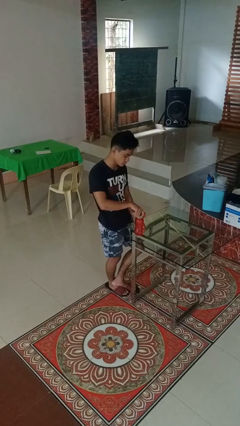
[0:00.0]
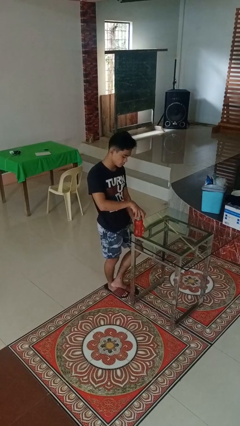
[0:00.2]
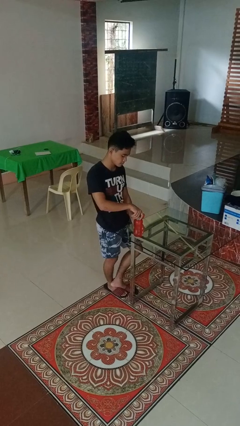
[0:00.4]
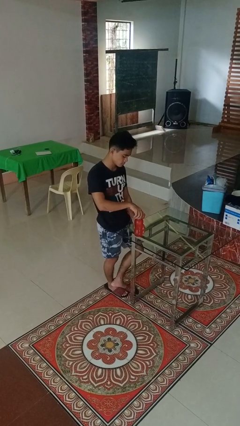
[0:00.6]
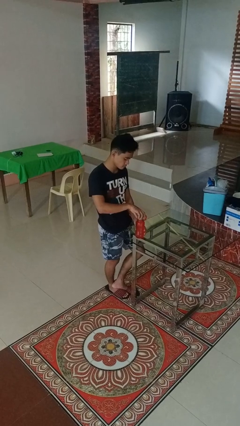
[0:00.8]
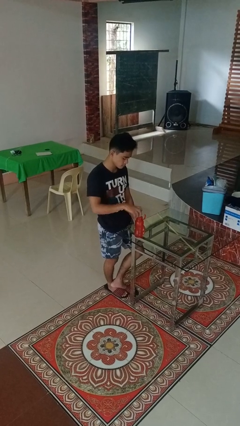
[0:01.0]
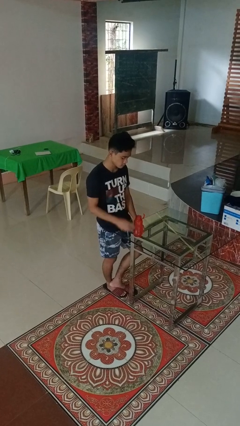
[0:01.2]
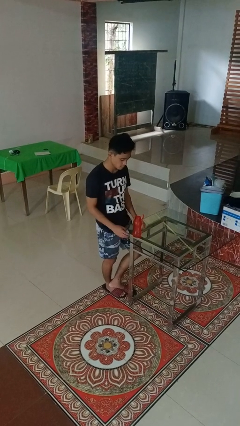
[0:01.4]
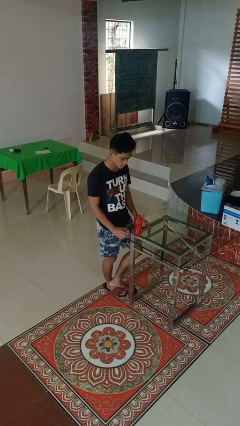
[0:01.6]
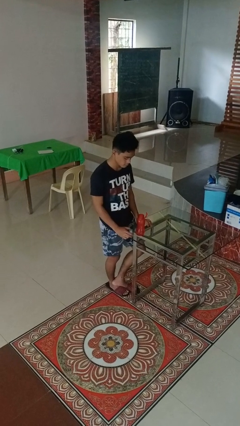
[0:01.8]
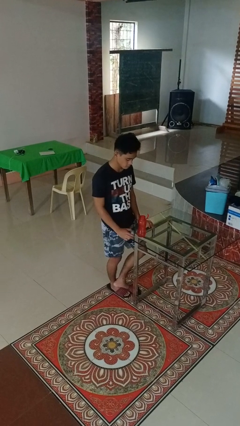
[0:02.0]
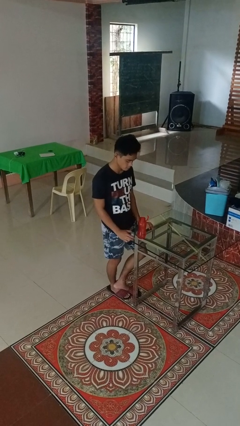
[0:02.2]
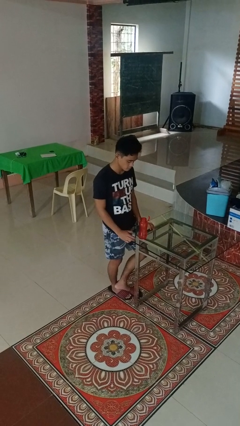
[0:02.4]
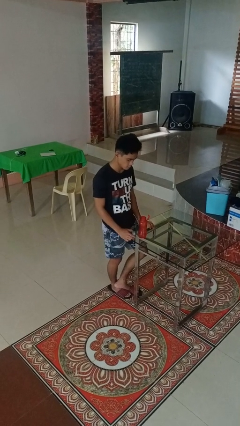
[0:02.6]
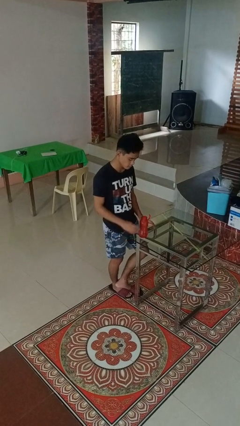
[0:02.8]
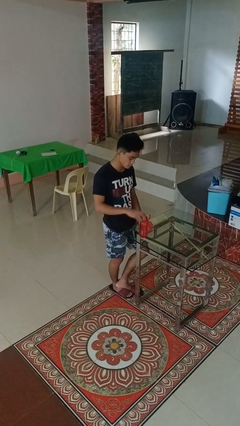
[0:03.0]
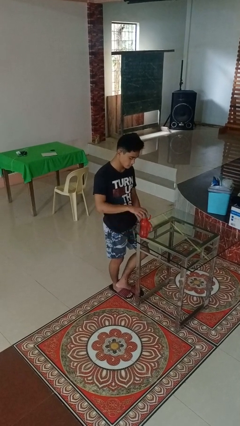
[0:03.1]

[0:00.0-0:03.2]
person unscrews lid from bottle

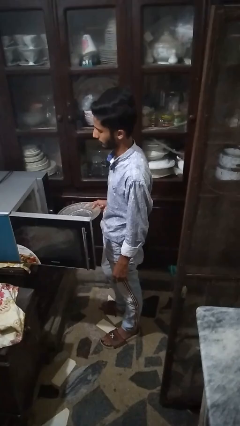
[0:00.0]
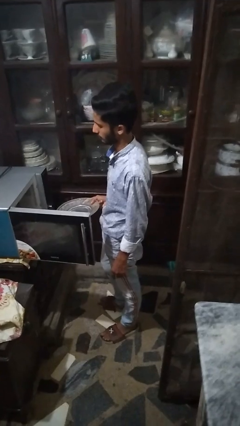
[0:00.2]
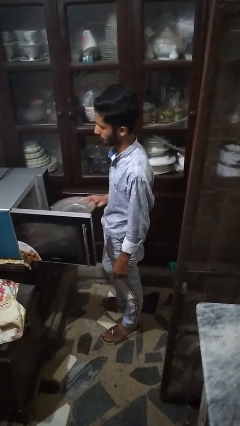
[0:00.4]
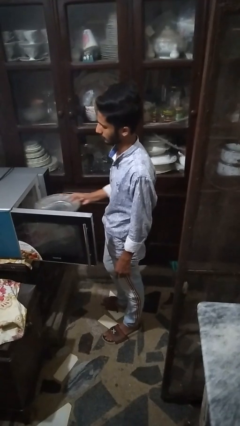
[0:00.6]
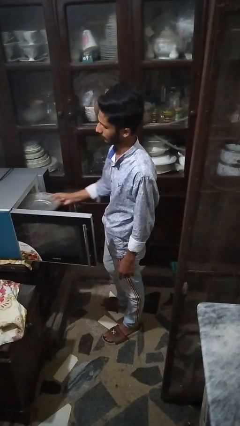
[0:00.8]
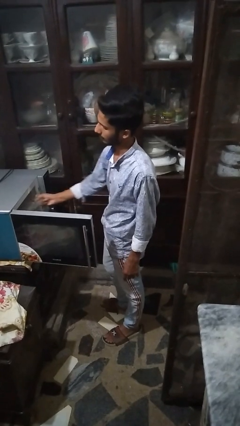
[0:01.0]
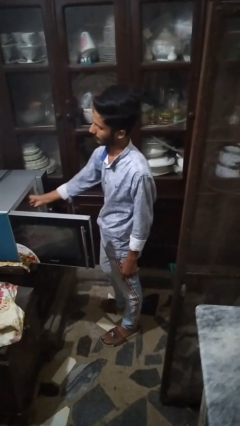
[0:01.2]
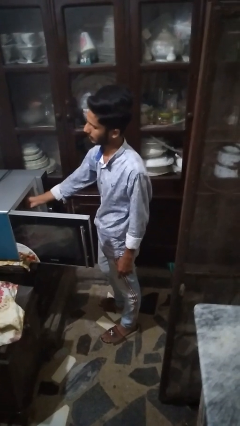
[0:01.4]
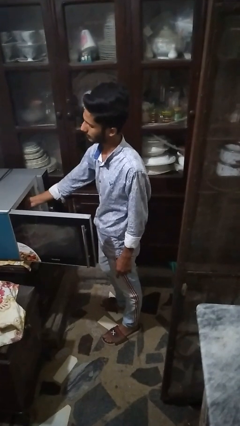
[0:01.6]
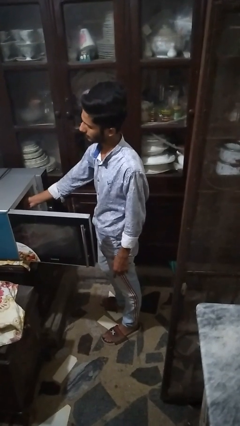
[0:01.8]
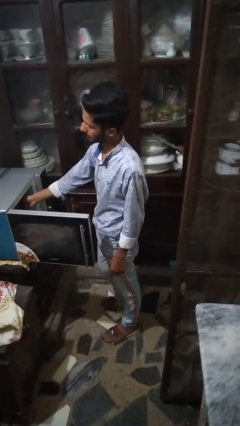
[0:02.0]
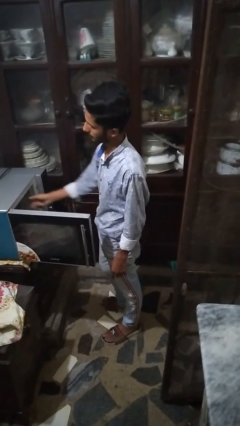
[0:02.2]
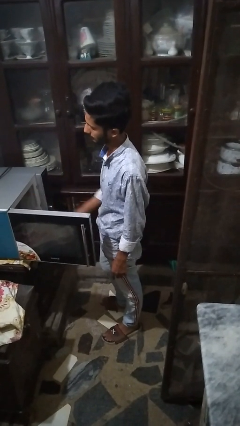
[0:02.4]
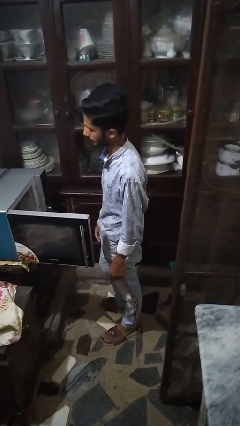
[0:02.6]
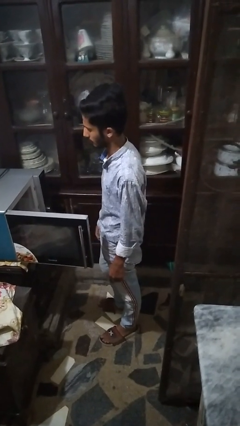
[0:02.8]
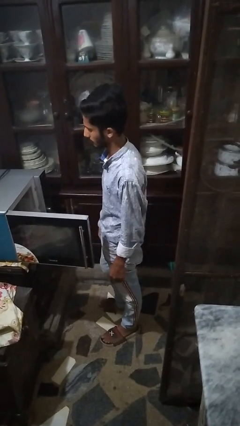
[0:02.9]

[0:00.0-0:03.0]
person puts object into microwave

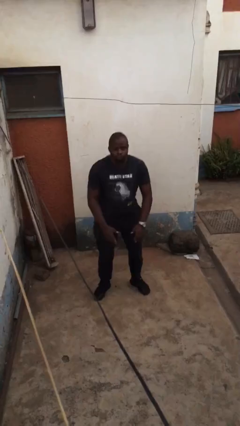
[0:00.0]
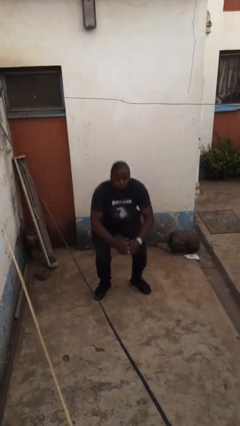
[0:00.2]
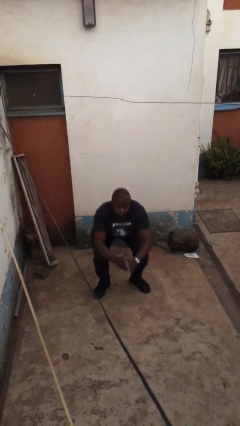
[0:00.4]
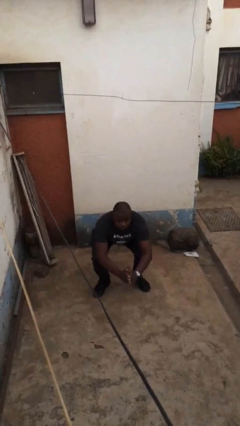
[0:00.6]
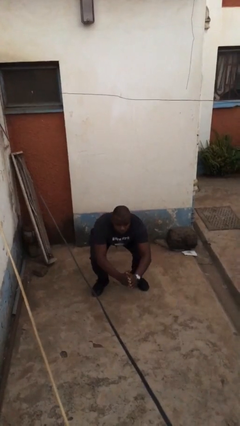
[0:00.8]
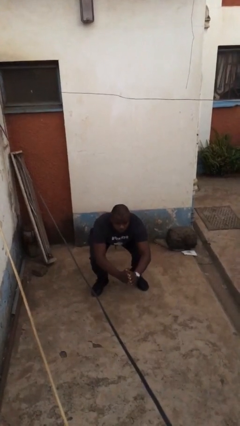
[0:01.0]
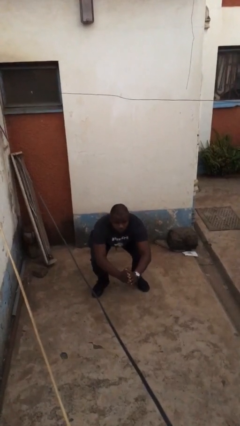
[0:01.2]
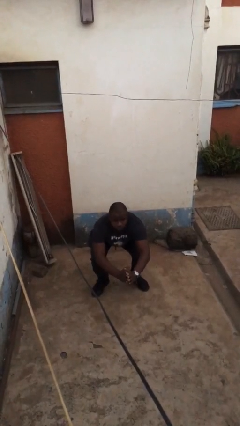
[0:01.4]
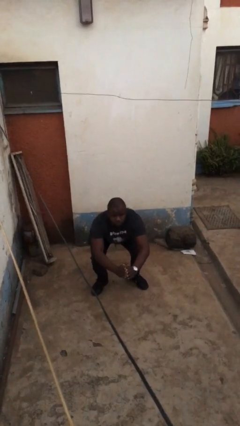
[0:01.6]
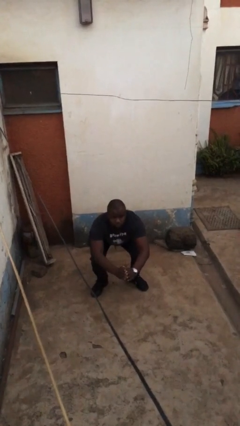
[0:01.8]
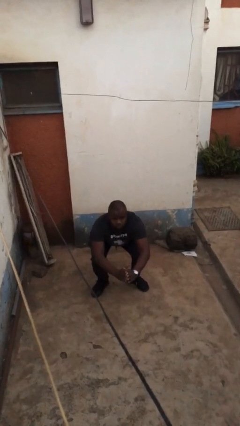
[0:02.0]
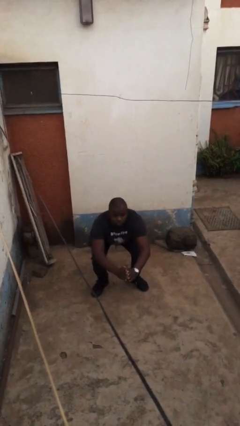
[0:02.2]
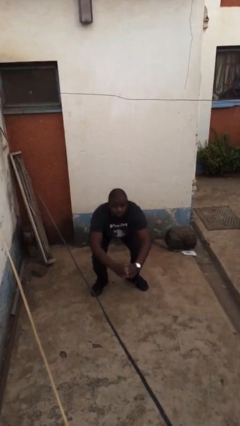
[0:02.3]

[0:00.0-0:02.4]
person squats

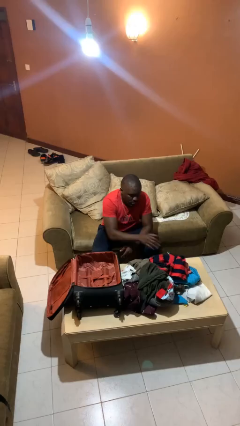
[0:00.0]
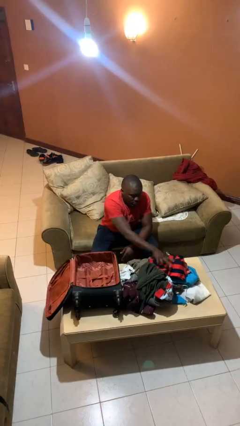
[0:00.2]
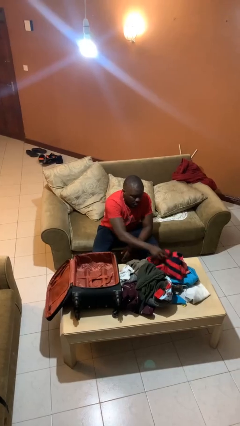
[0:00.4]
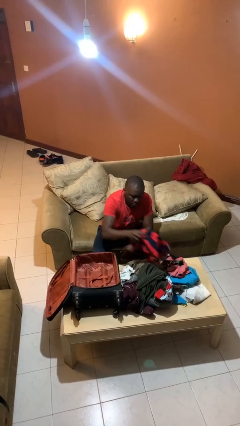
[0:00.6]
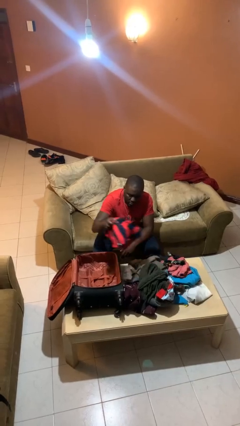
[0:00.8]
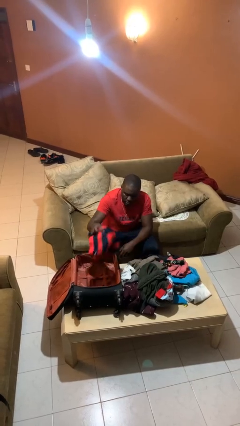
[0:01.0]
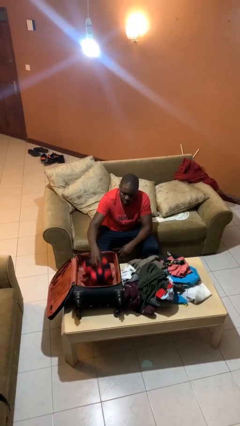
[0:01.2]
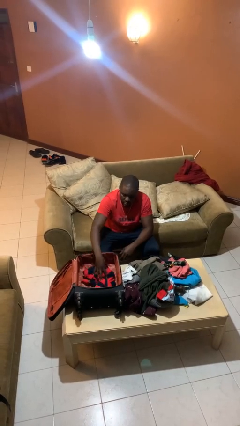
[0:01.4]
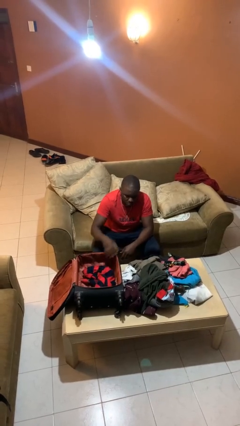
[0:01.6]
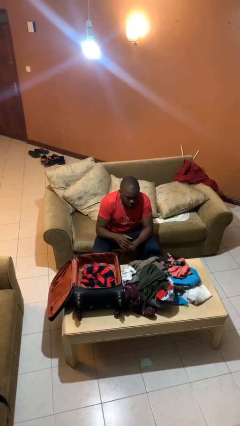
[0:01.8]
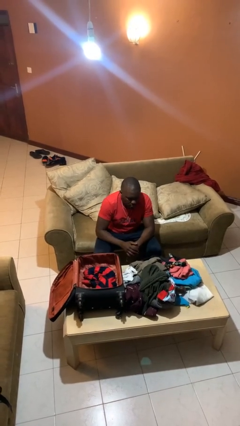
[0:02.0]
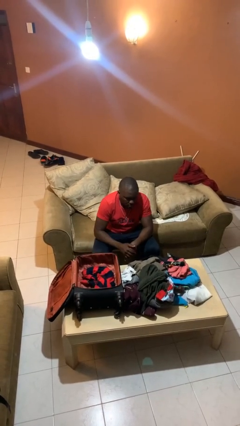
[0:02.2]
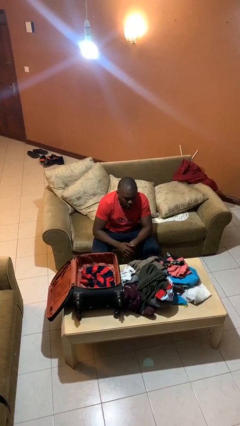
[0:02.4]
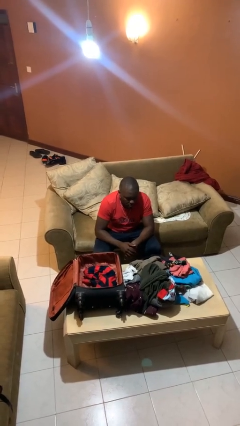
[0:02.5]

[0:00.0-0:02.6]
person loads clothes into suitcase

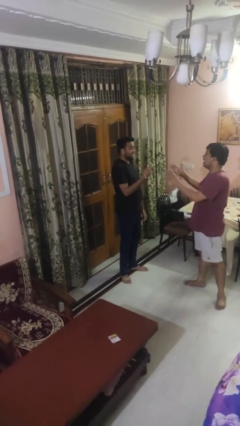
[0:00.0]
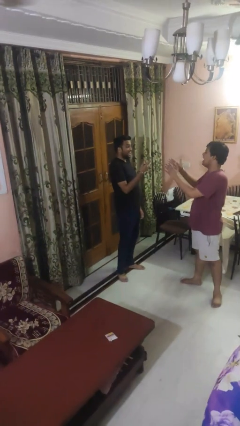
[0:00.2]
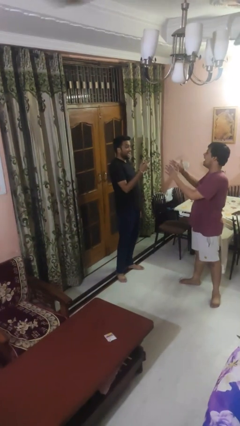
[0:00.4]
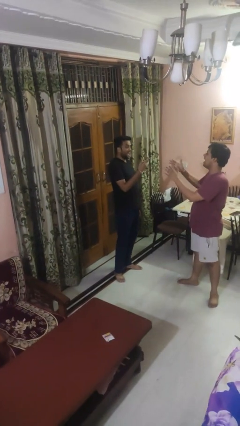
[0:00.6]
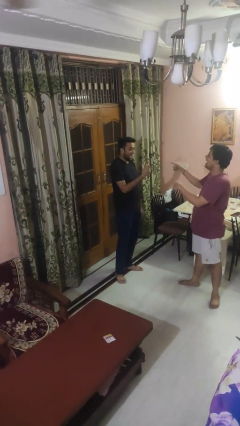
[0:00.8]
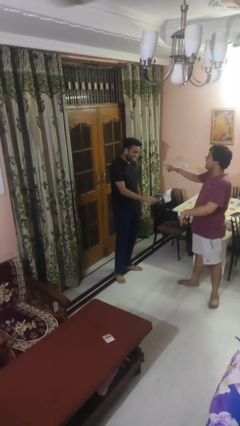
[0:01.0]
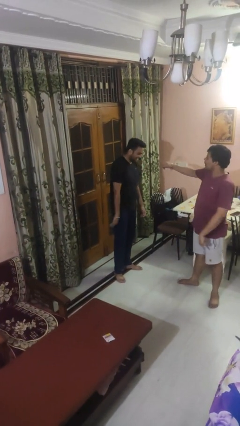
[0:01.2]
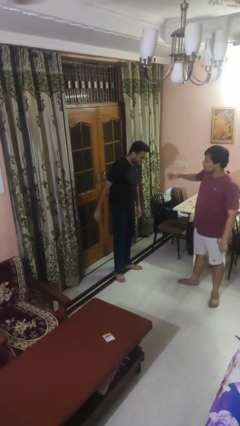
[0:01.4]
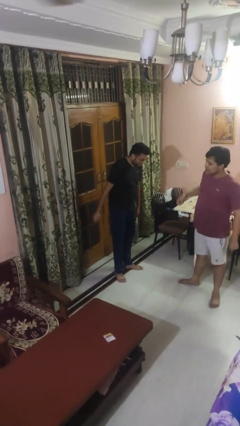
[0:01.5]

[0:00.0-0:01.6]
person laughs with person

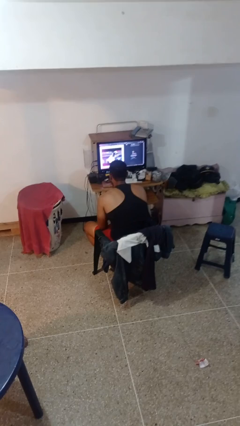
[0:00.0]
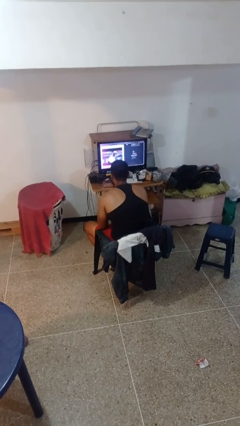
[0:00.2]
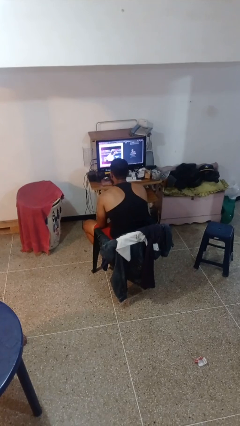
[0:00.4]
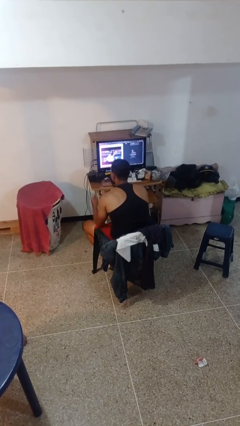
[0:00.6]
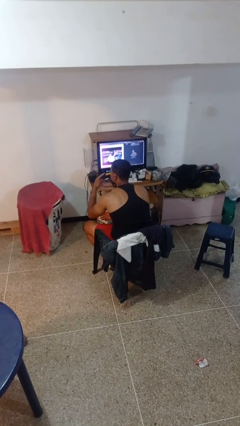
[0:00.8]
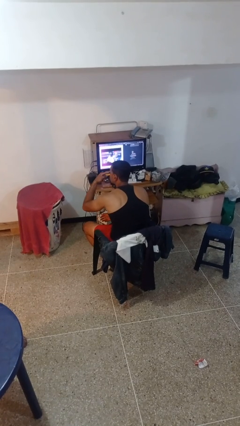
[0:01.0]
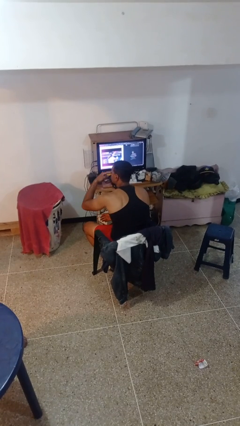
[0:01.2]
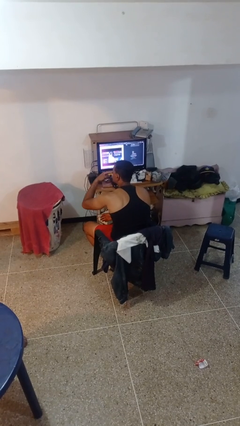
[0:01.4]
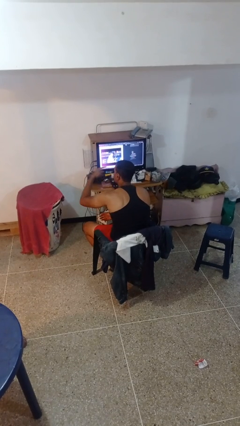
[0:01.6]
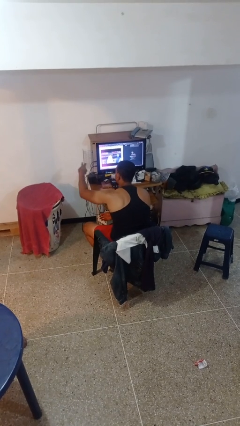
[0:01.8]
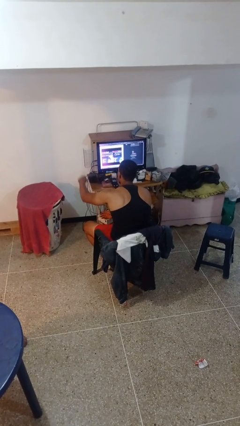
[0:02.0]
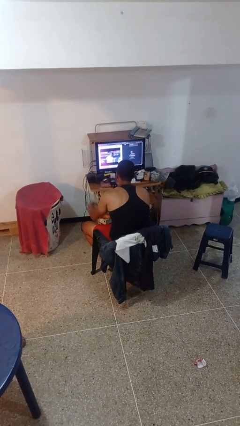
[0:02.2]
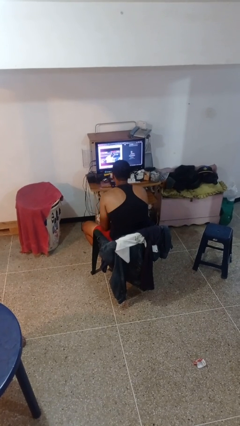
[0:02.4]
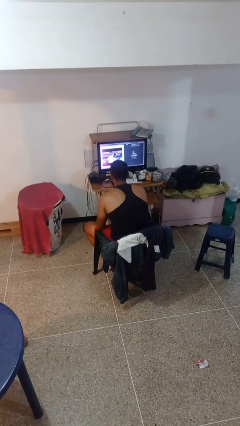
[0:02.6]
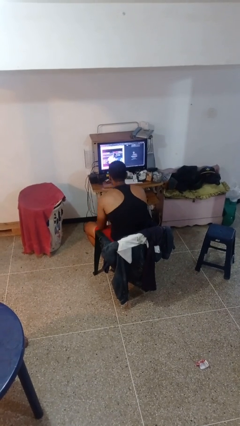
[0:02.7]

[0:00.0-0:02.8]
person gestures watch closely

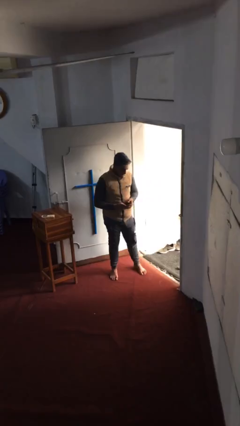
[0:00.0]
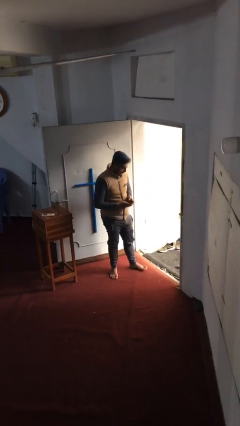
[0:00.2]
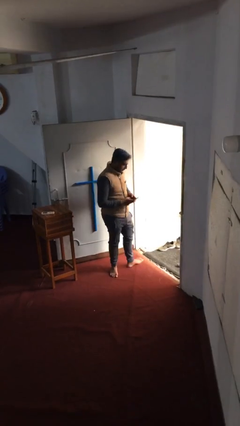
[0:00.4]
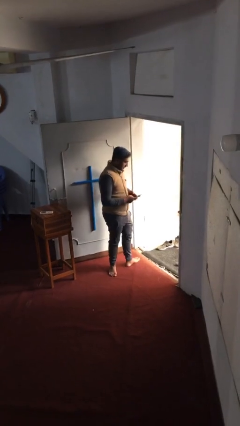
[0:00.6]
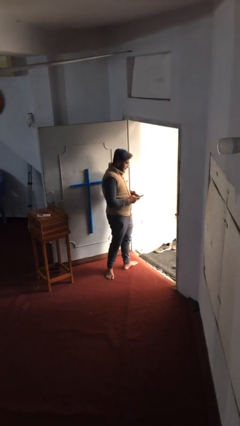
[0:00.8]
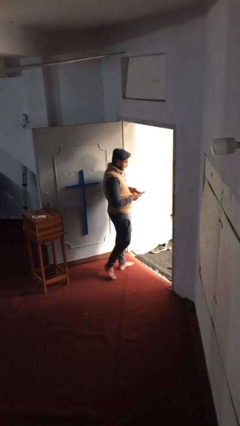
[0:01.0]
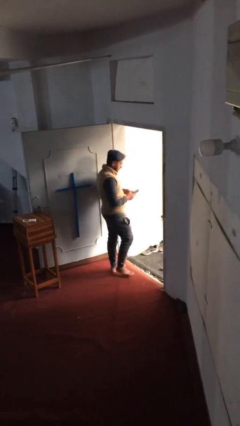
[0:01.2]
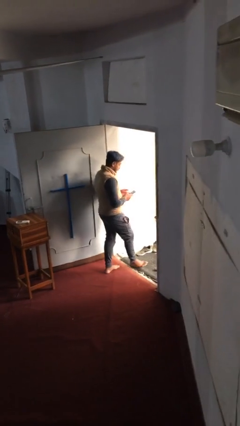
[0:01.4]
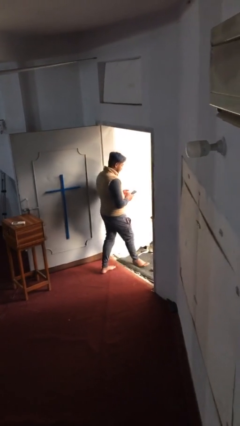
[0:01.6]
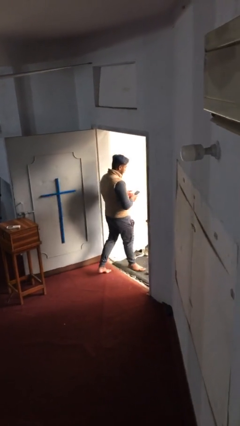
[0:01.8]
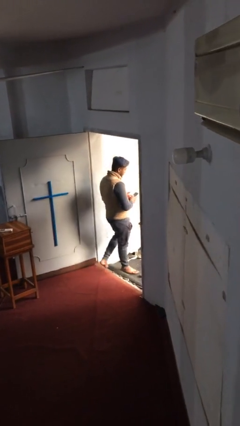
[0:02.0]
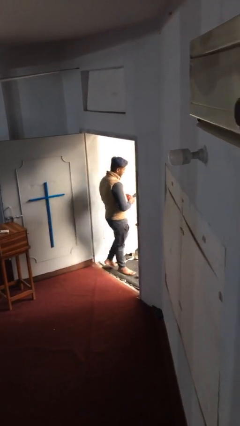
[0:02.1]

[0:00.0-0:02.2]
person exits scene through structure
